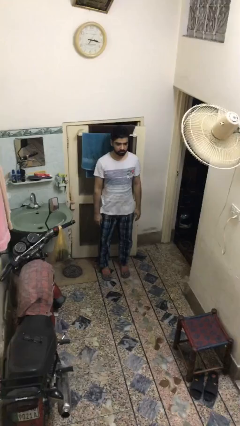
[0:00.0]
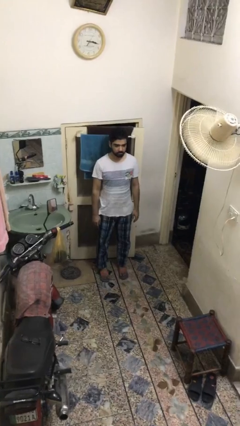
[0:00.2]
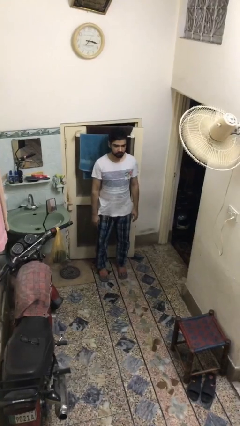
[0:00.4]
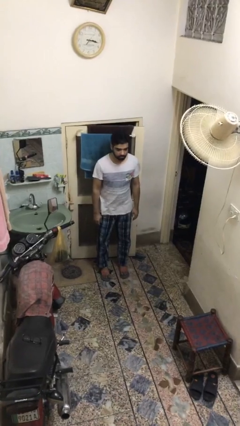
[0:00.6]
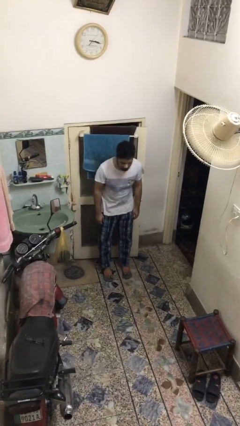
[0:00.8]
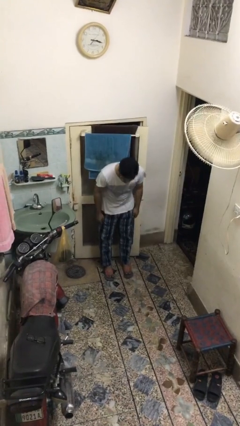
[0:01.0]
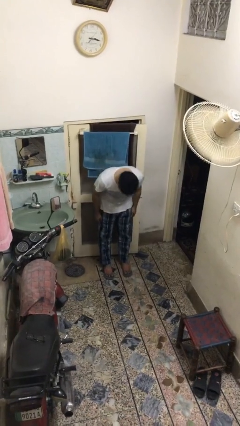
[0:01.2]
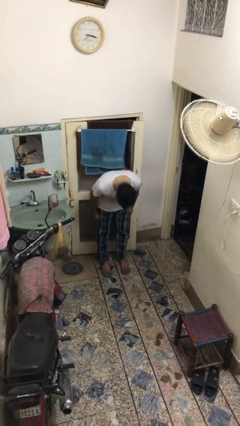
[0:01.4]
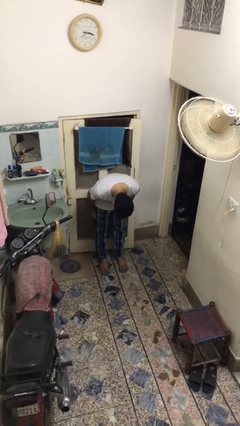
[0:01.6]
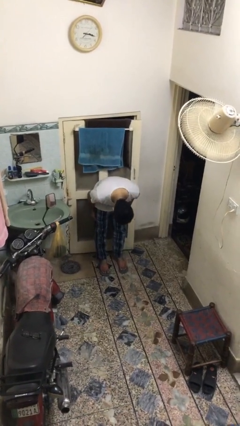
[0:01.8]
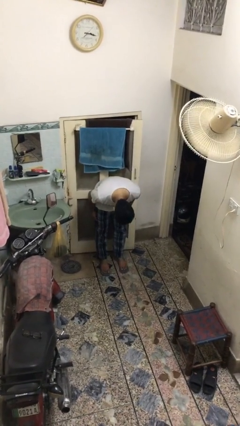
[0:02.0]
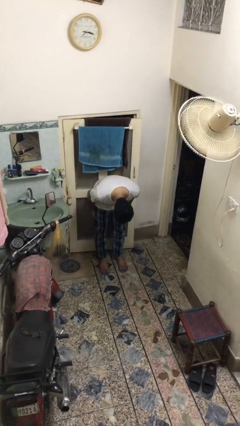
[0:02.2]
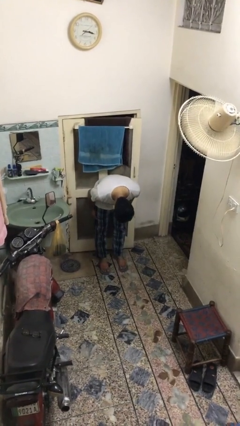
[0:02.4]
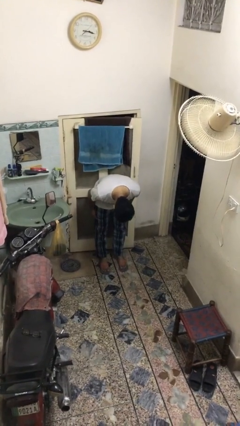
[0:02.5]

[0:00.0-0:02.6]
person bows

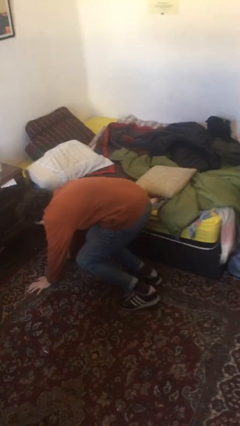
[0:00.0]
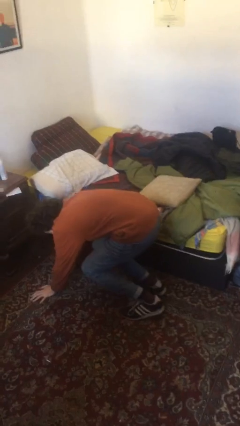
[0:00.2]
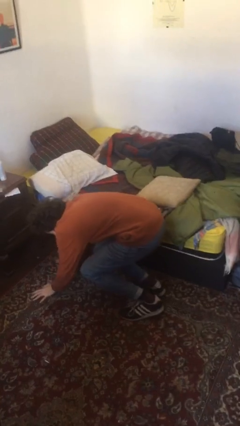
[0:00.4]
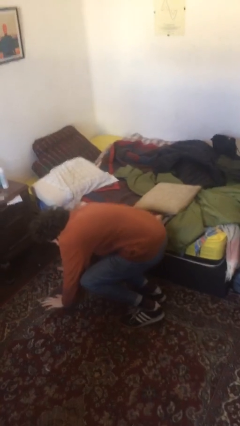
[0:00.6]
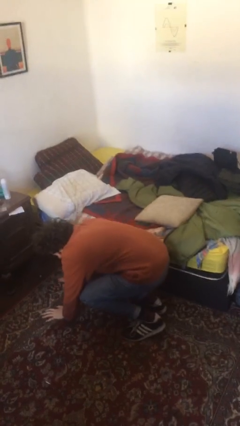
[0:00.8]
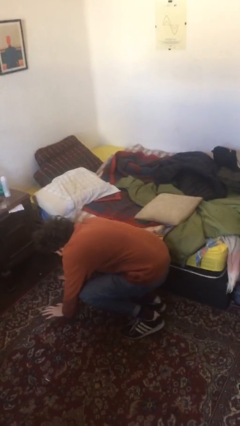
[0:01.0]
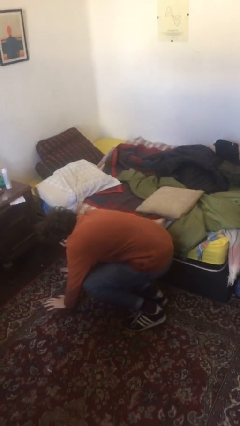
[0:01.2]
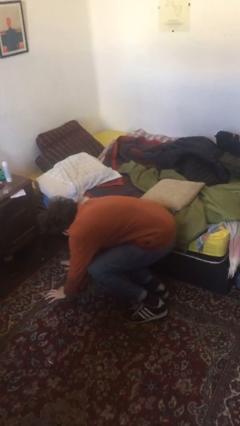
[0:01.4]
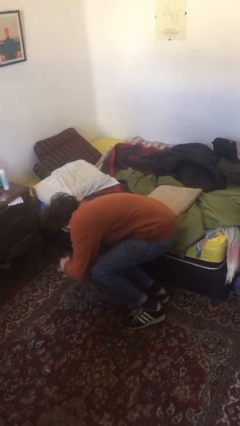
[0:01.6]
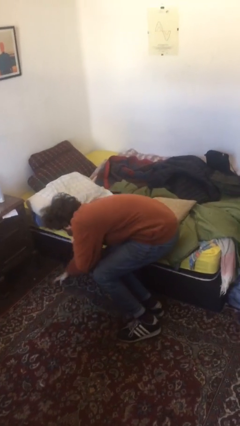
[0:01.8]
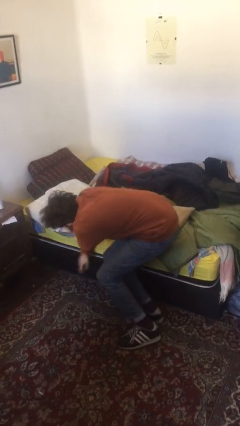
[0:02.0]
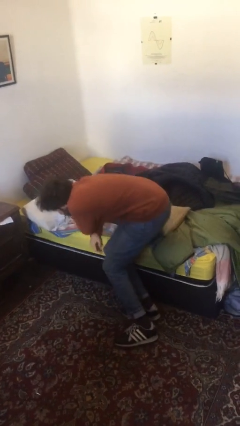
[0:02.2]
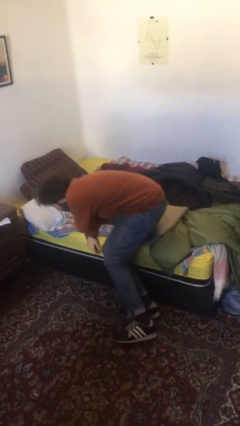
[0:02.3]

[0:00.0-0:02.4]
person stands up from floor

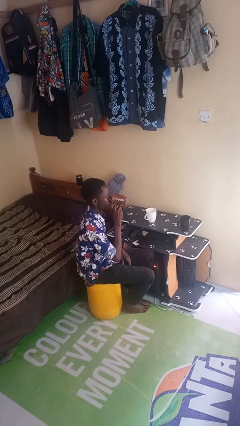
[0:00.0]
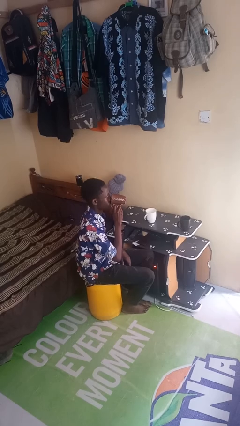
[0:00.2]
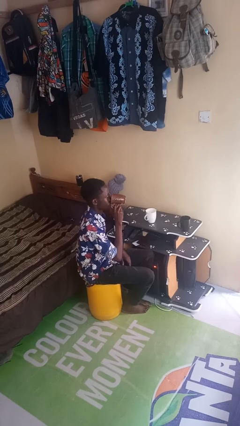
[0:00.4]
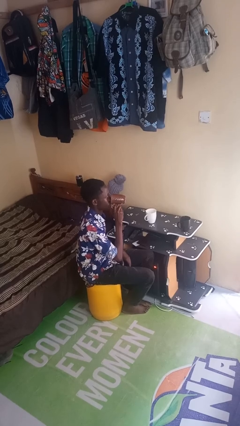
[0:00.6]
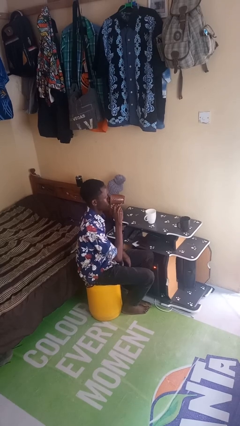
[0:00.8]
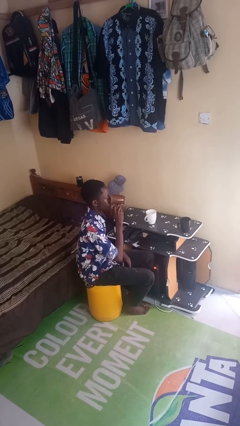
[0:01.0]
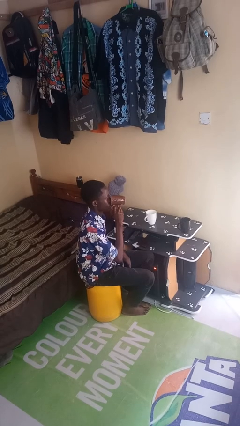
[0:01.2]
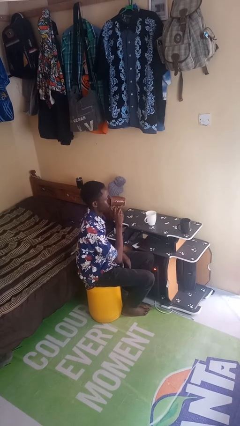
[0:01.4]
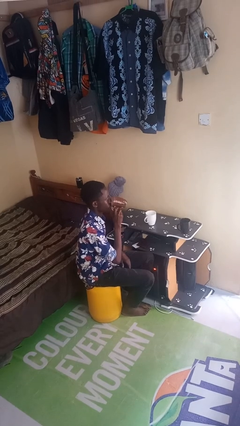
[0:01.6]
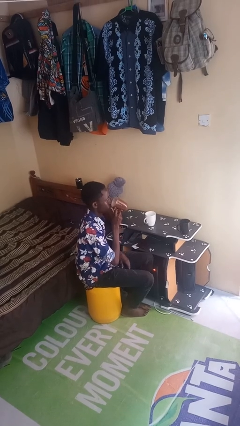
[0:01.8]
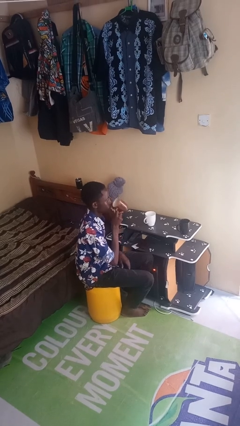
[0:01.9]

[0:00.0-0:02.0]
person drinks from shotglass

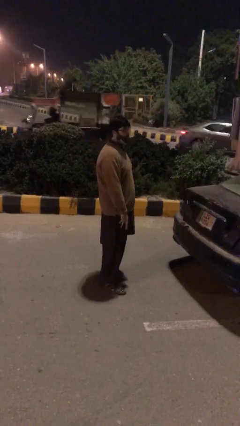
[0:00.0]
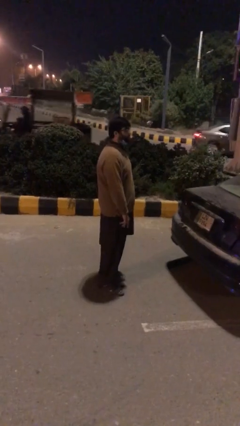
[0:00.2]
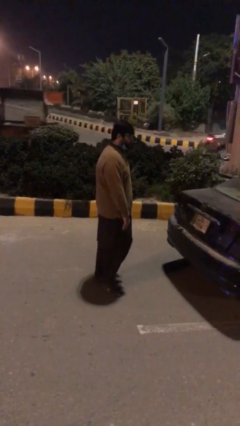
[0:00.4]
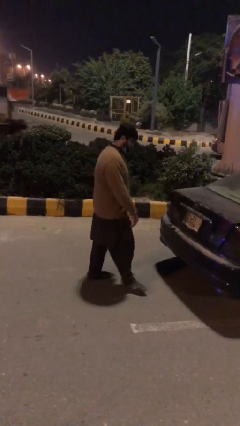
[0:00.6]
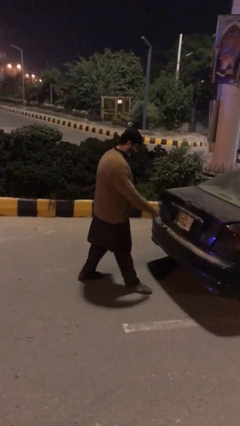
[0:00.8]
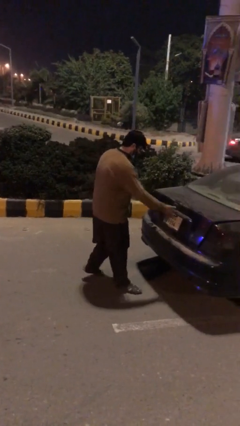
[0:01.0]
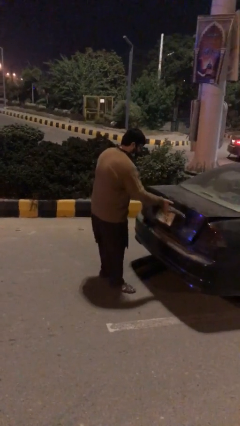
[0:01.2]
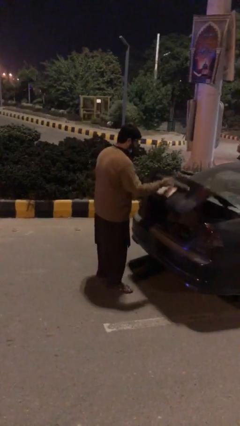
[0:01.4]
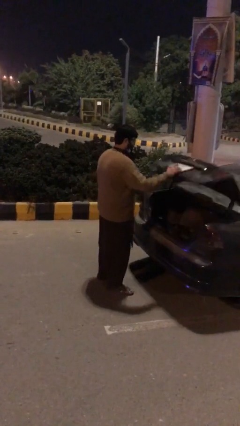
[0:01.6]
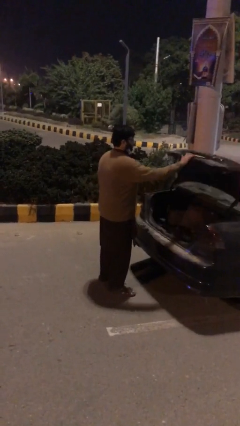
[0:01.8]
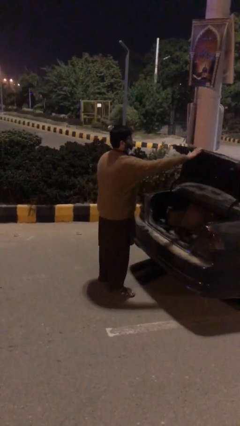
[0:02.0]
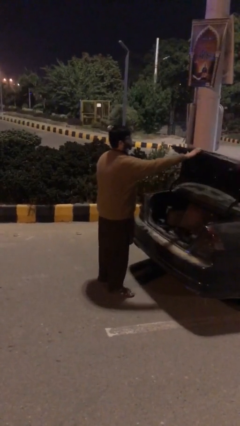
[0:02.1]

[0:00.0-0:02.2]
person opens car trunk

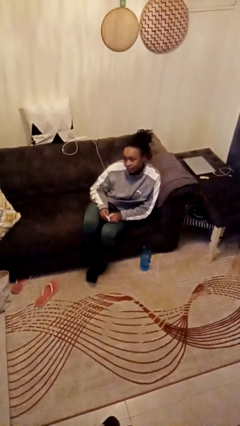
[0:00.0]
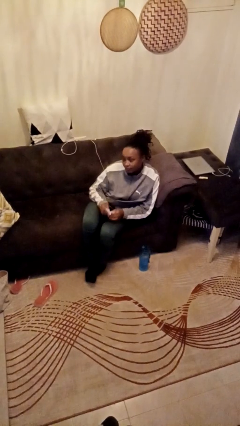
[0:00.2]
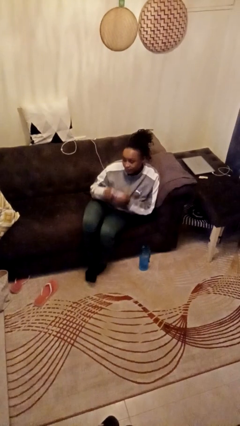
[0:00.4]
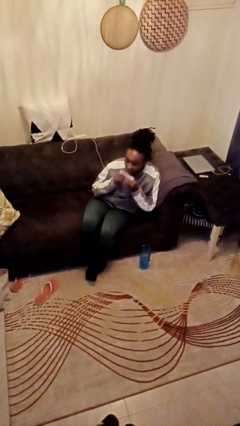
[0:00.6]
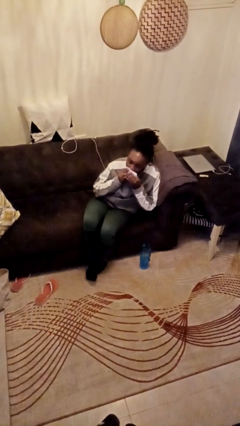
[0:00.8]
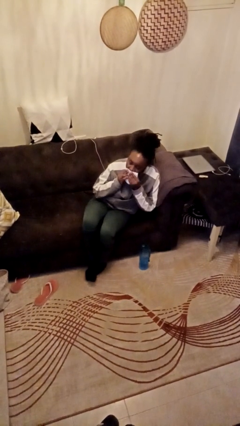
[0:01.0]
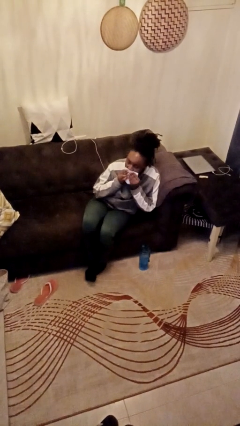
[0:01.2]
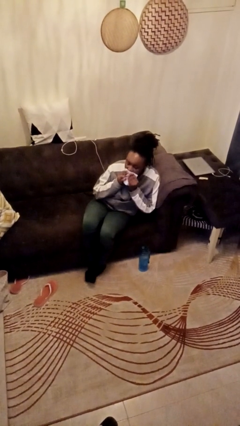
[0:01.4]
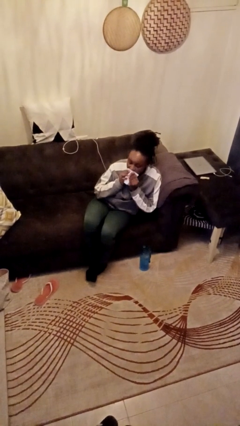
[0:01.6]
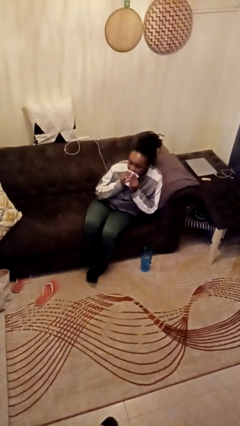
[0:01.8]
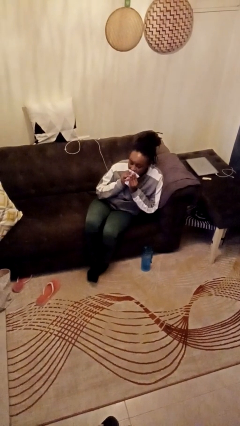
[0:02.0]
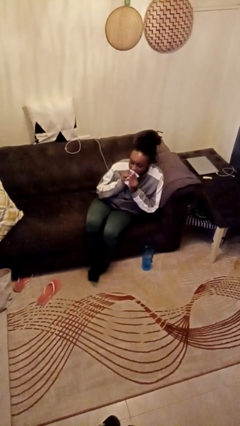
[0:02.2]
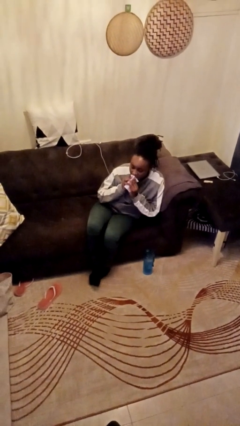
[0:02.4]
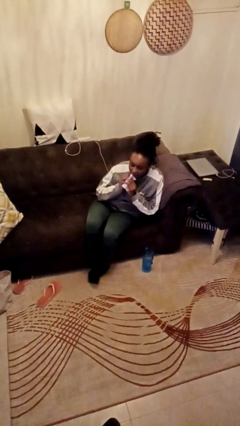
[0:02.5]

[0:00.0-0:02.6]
person wipes mouth with napkin

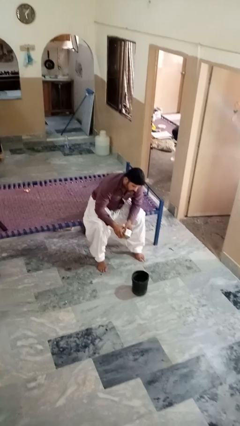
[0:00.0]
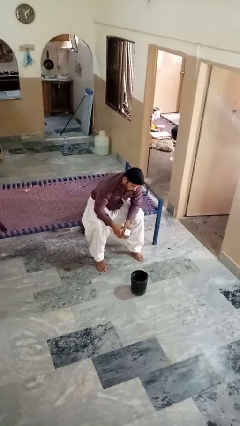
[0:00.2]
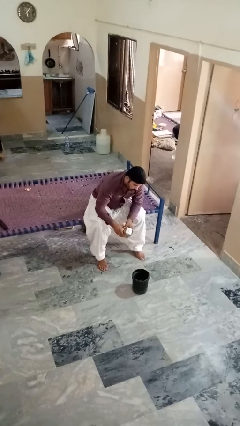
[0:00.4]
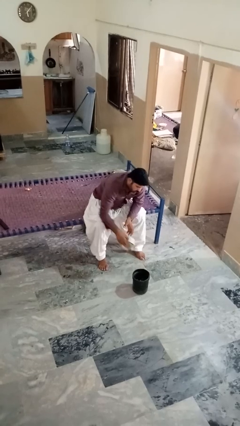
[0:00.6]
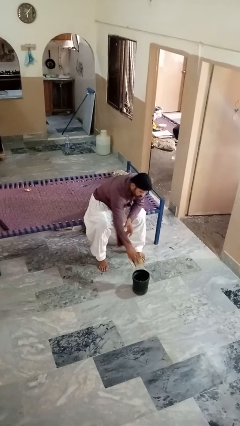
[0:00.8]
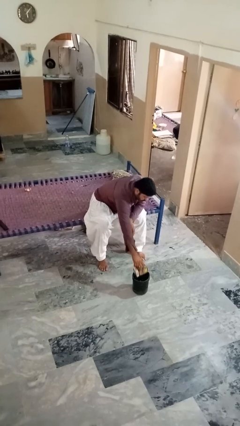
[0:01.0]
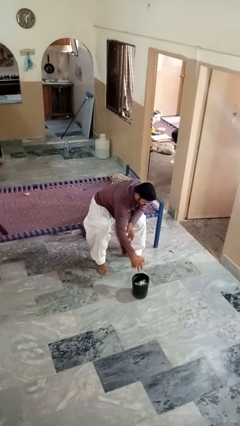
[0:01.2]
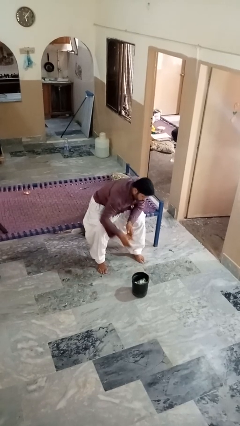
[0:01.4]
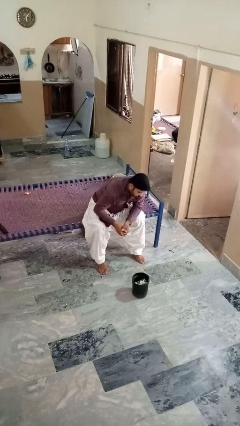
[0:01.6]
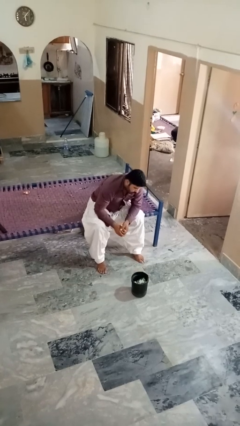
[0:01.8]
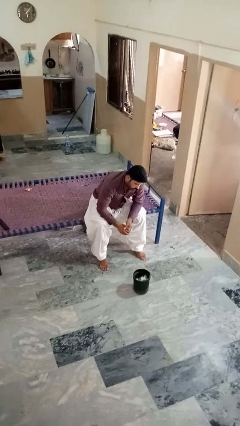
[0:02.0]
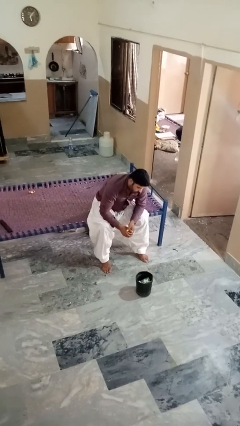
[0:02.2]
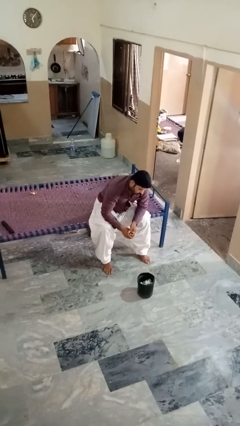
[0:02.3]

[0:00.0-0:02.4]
person puts object into basket

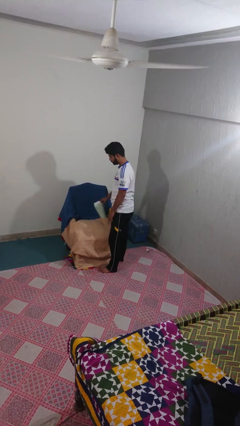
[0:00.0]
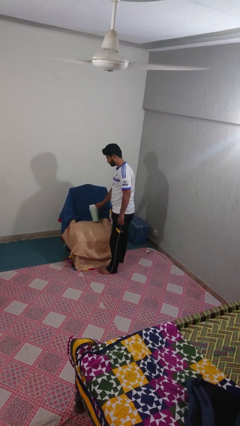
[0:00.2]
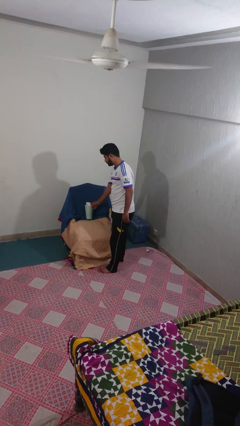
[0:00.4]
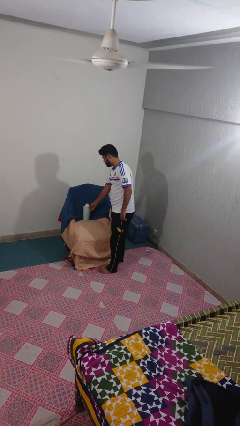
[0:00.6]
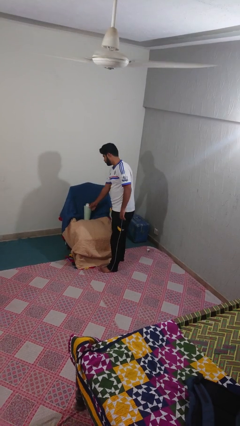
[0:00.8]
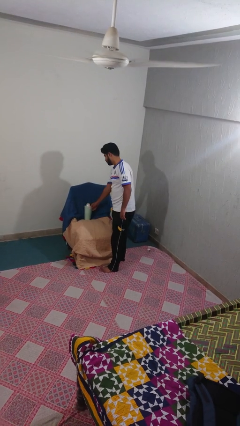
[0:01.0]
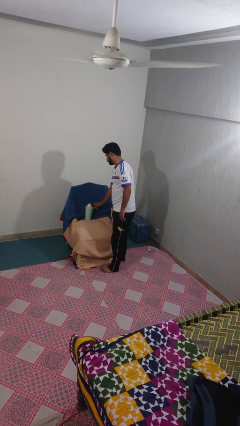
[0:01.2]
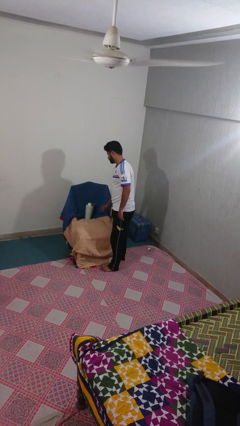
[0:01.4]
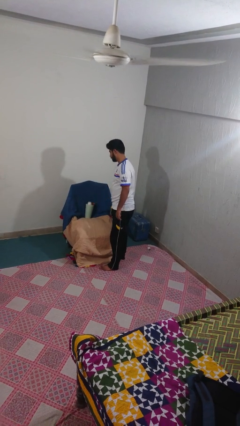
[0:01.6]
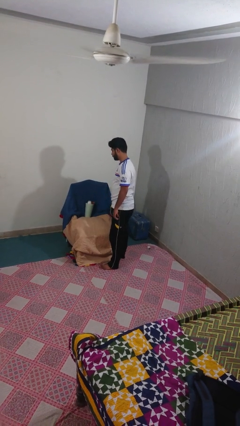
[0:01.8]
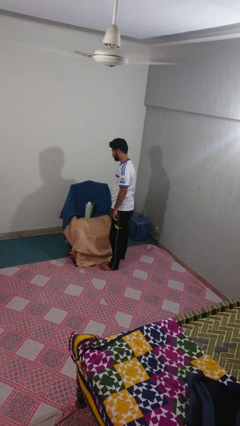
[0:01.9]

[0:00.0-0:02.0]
person puts down object on couch

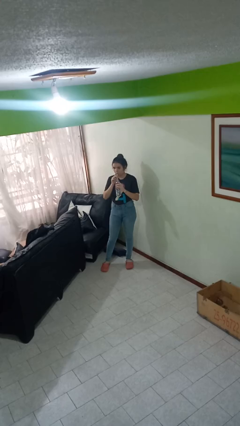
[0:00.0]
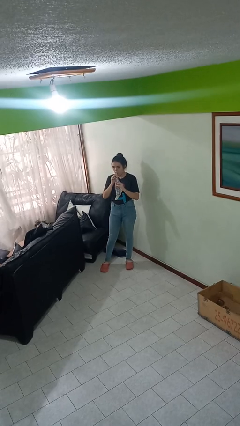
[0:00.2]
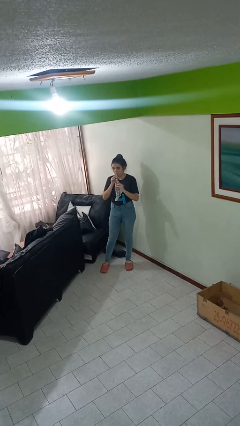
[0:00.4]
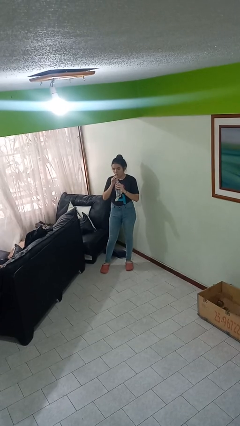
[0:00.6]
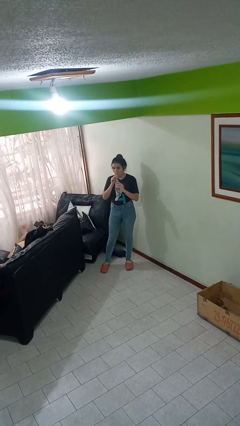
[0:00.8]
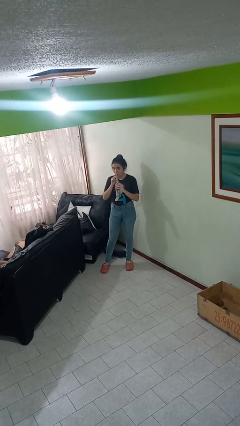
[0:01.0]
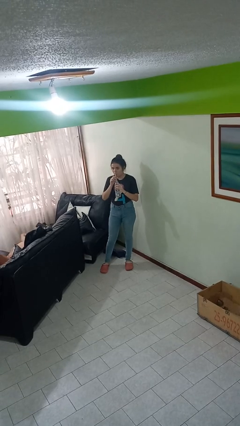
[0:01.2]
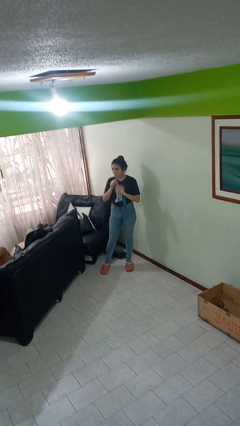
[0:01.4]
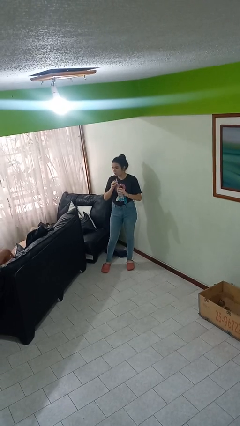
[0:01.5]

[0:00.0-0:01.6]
person drinks from straw
